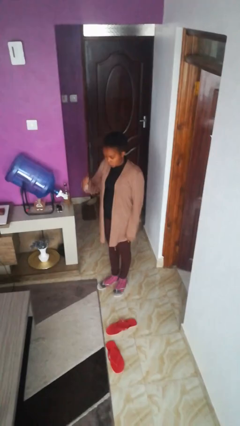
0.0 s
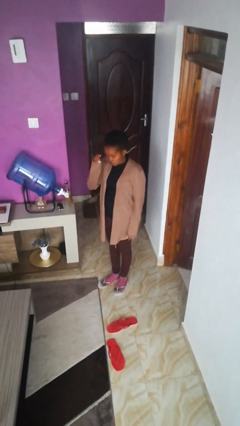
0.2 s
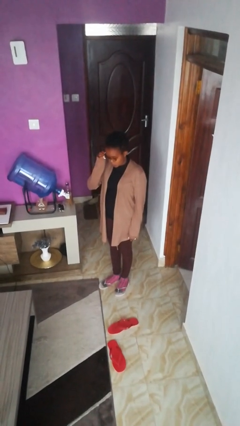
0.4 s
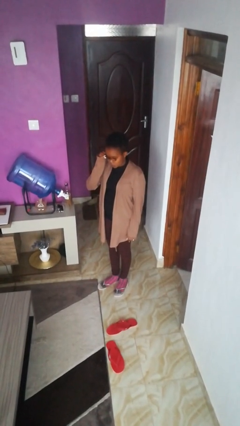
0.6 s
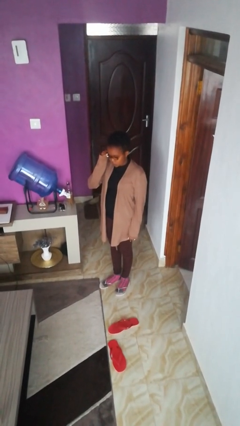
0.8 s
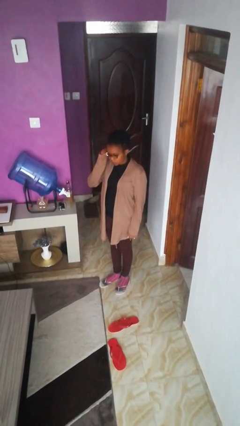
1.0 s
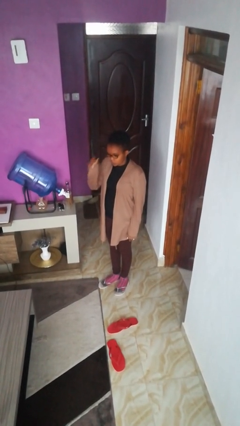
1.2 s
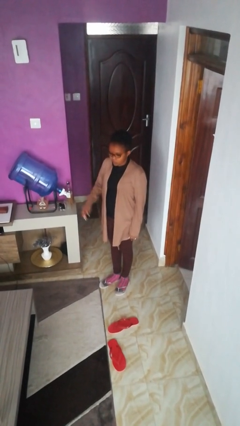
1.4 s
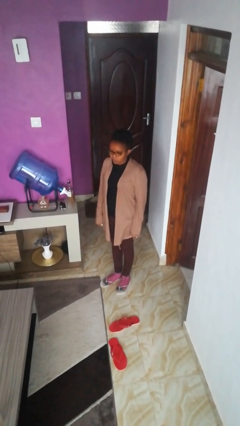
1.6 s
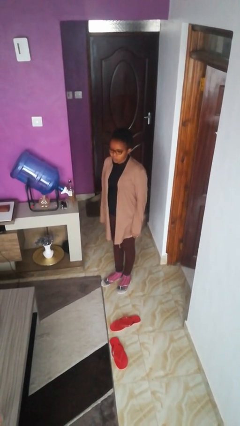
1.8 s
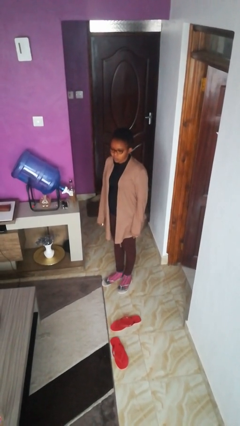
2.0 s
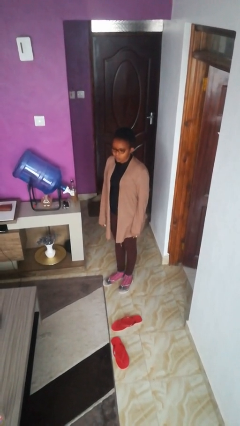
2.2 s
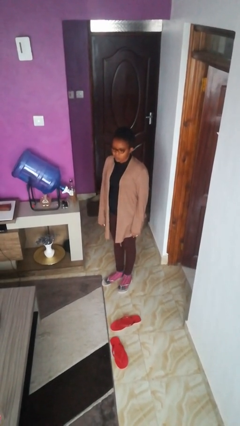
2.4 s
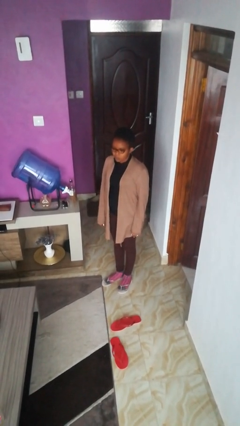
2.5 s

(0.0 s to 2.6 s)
person puts on glasses

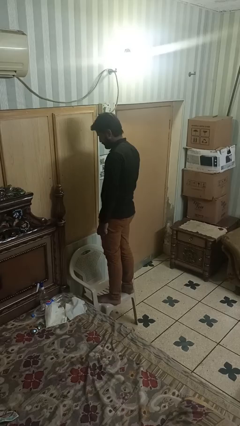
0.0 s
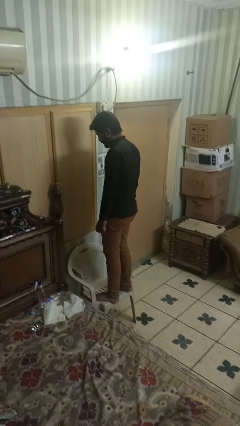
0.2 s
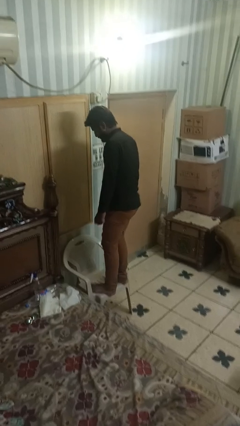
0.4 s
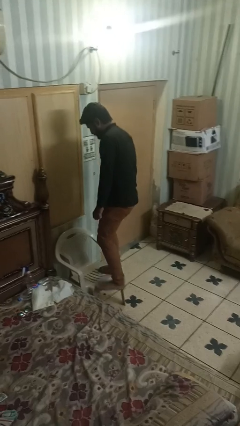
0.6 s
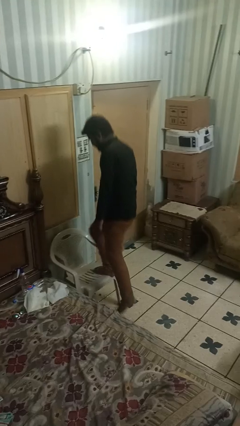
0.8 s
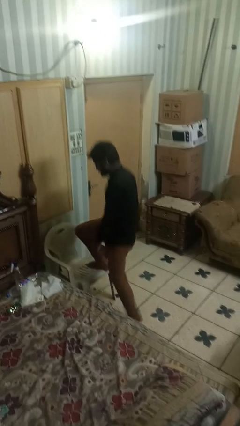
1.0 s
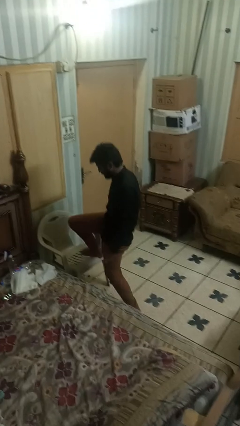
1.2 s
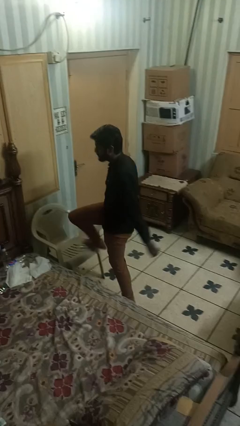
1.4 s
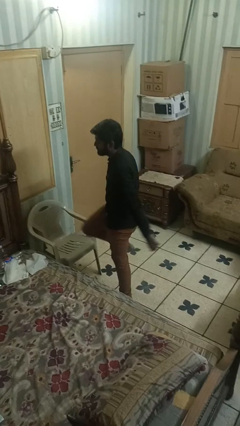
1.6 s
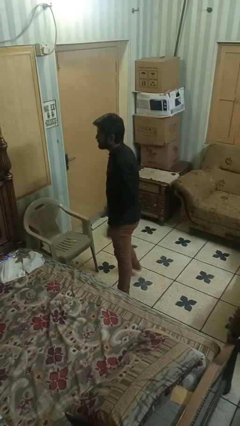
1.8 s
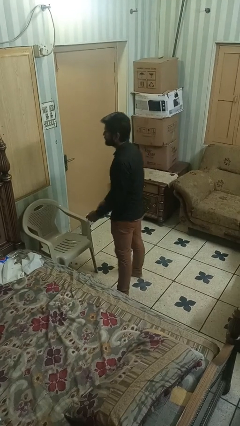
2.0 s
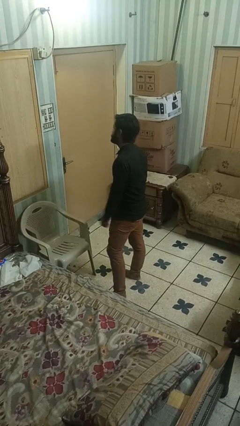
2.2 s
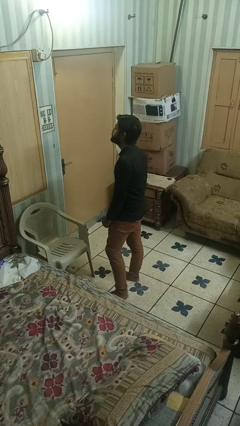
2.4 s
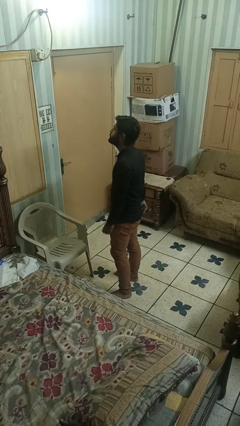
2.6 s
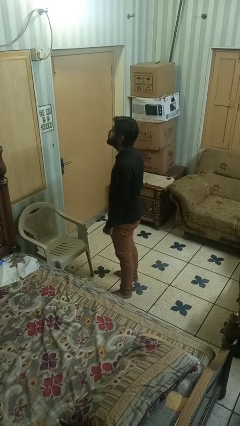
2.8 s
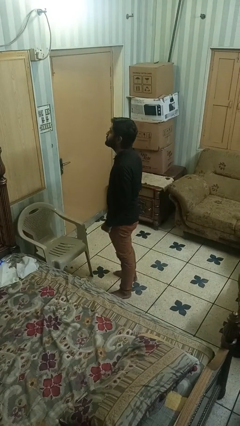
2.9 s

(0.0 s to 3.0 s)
person climbs off chair

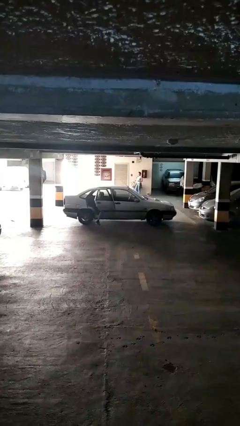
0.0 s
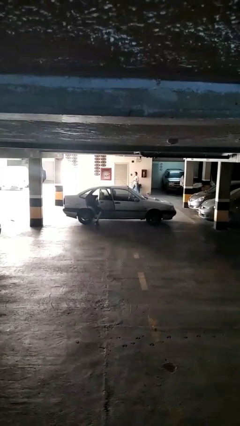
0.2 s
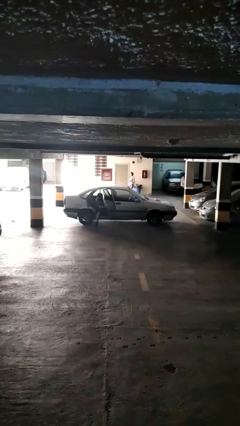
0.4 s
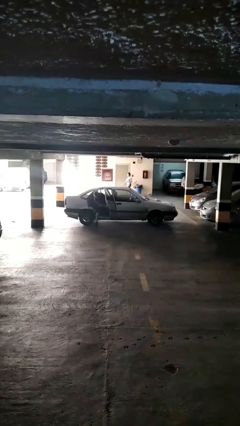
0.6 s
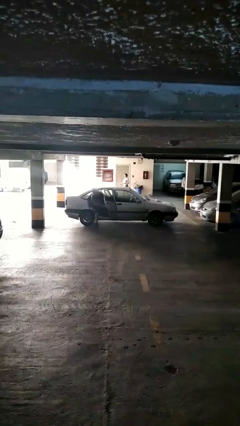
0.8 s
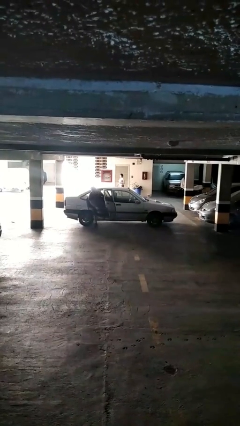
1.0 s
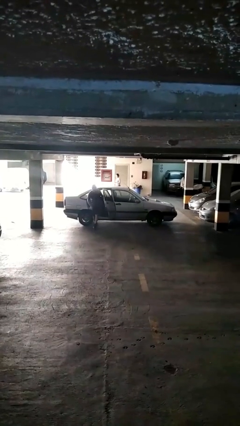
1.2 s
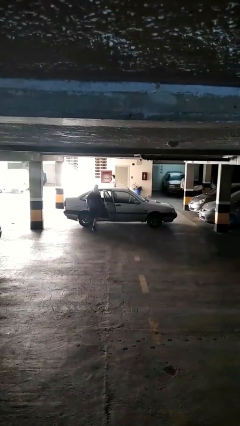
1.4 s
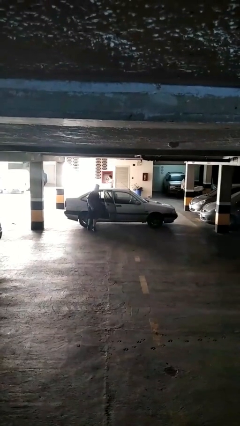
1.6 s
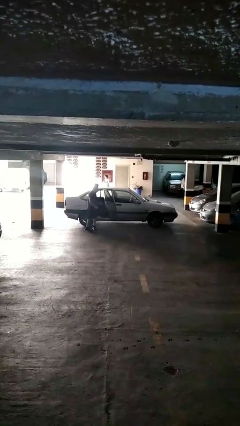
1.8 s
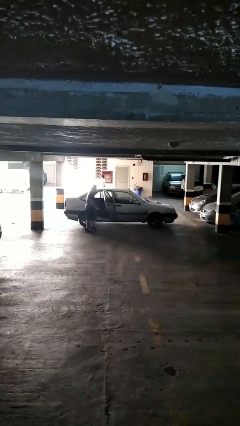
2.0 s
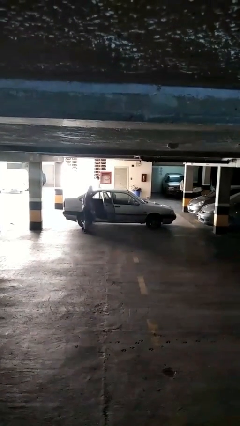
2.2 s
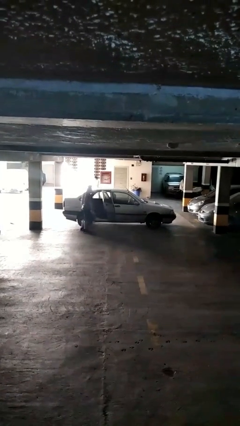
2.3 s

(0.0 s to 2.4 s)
car drops off person

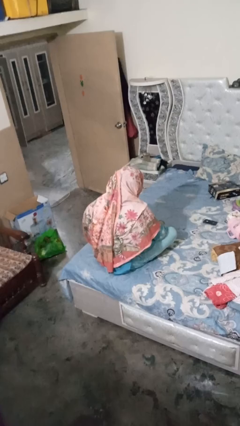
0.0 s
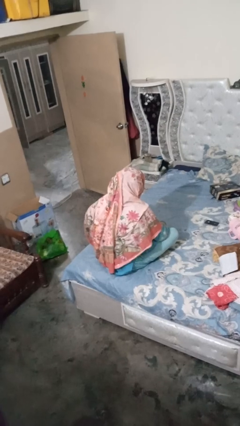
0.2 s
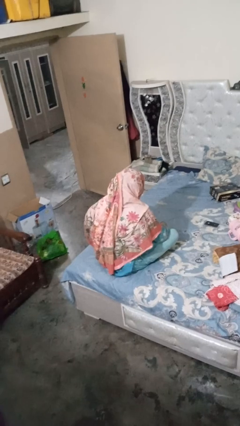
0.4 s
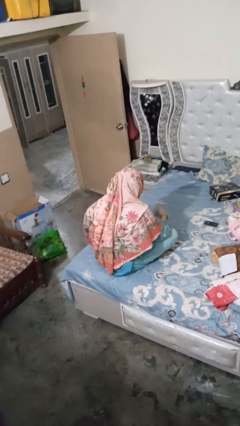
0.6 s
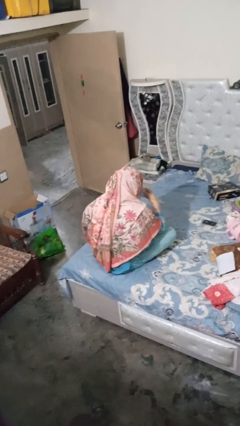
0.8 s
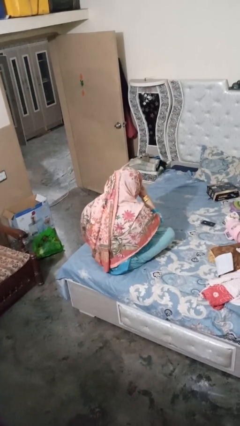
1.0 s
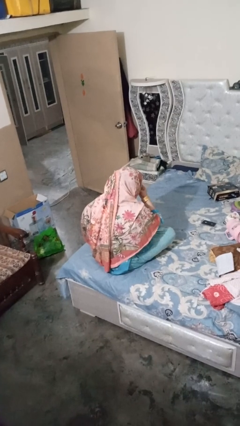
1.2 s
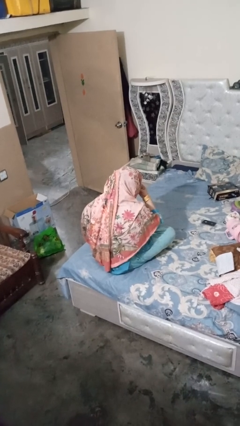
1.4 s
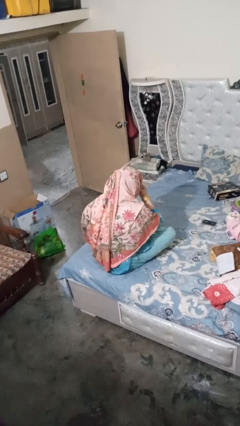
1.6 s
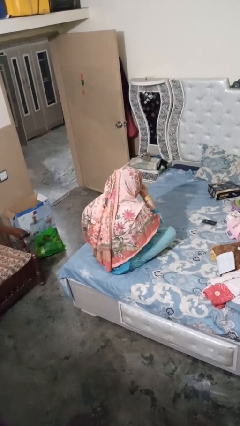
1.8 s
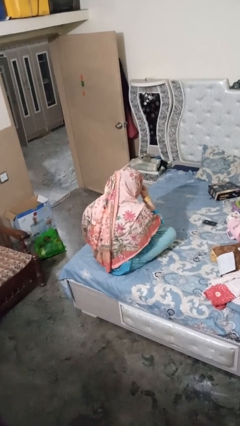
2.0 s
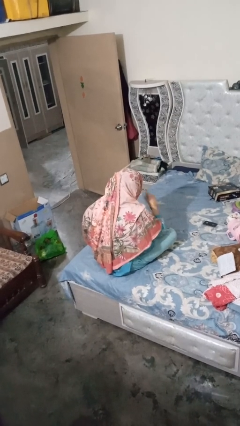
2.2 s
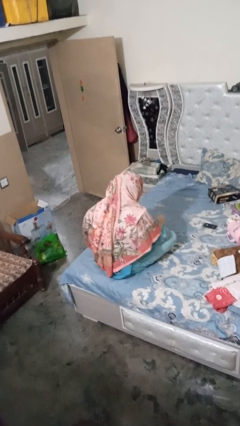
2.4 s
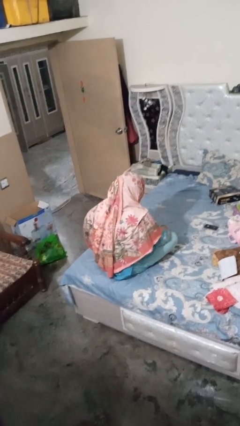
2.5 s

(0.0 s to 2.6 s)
person blows nose

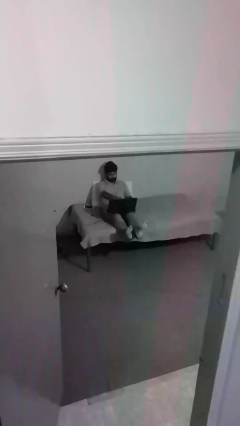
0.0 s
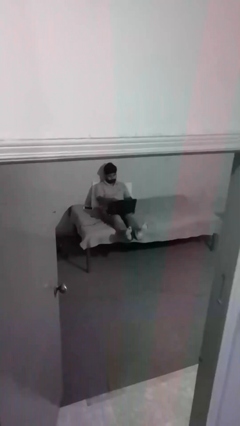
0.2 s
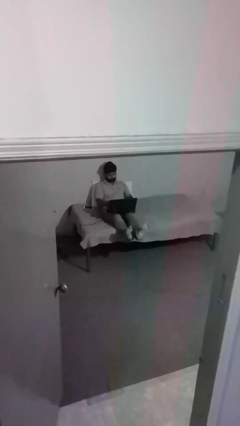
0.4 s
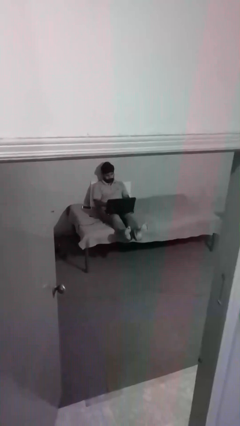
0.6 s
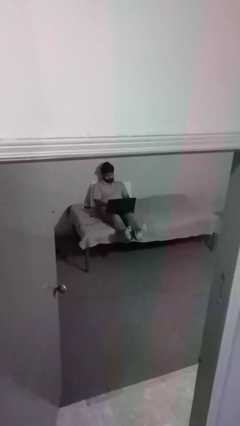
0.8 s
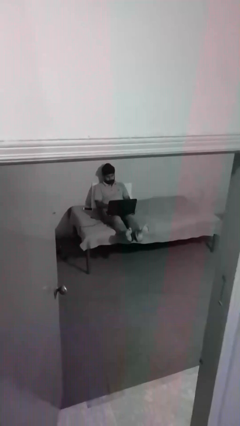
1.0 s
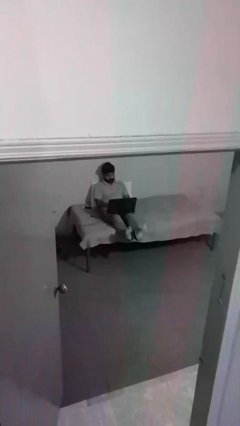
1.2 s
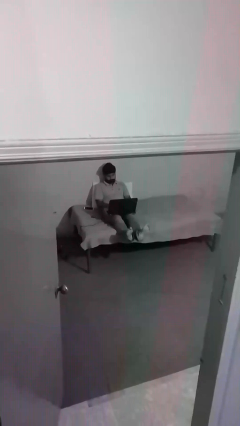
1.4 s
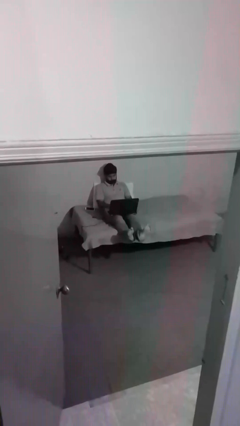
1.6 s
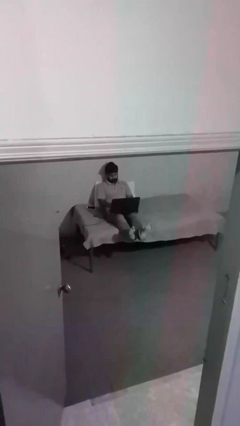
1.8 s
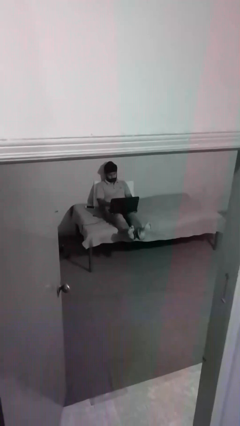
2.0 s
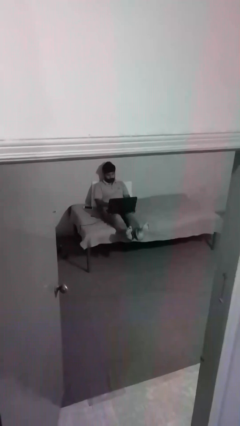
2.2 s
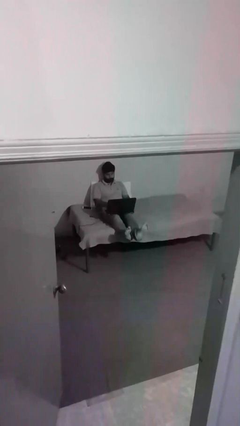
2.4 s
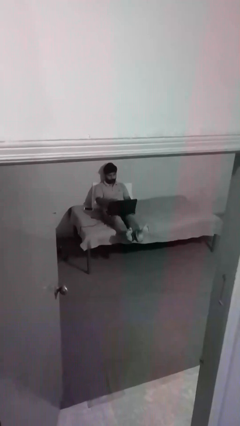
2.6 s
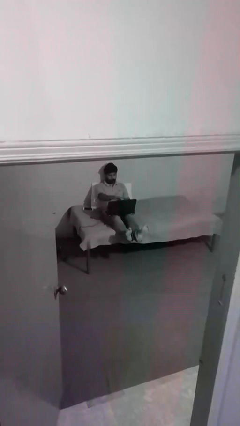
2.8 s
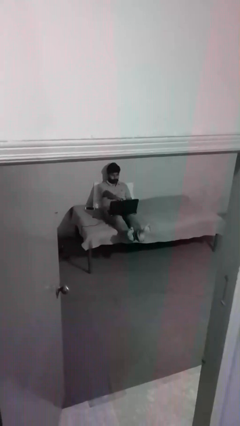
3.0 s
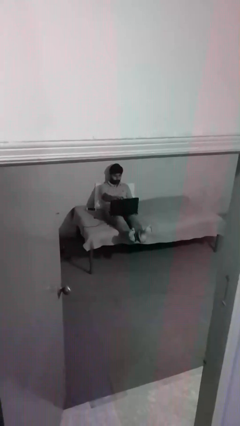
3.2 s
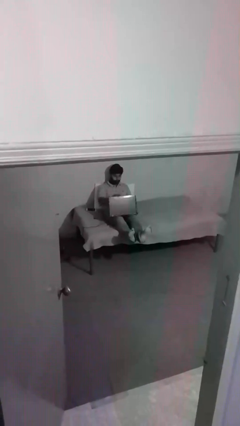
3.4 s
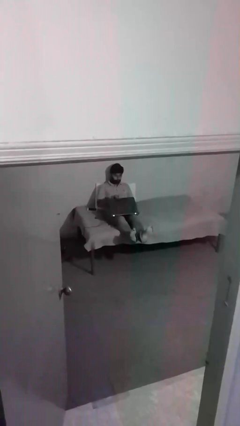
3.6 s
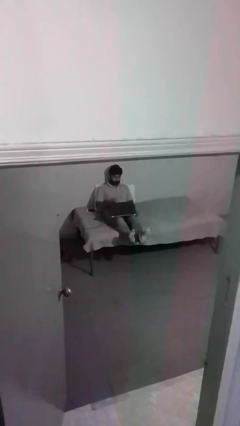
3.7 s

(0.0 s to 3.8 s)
person interacts with laptop

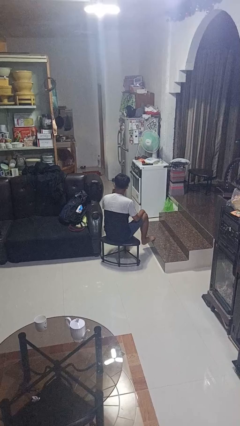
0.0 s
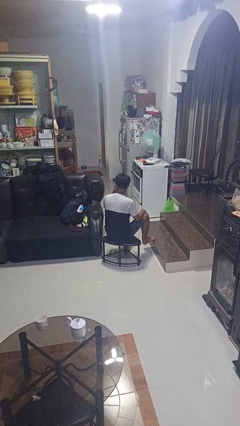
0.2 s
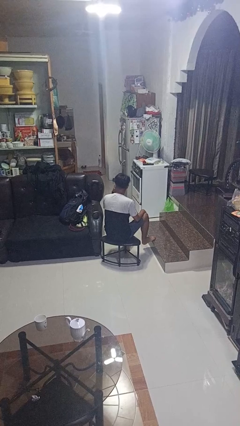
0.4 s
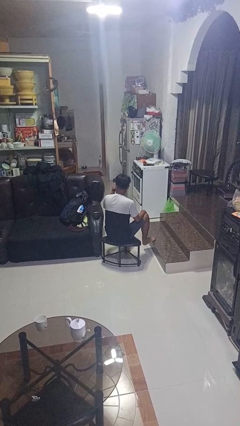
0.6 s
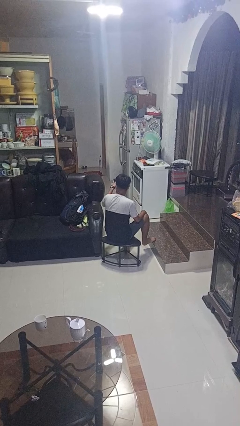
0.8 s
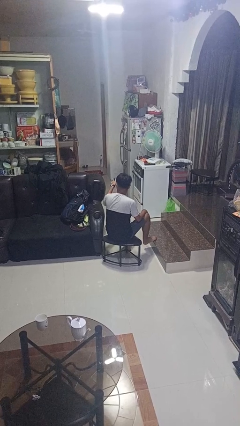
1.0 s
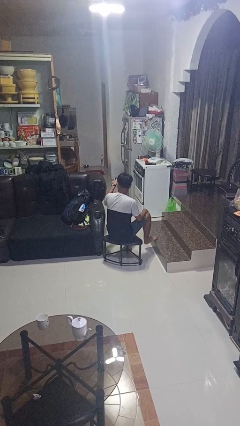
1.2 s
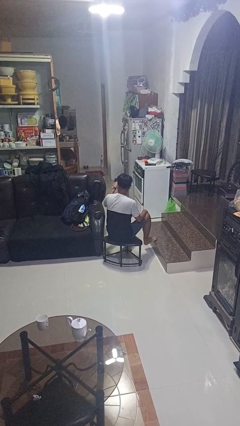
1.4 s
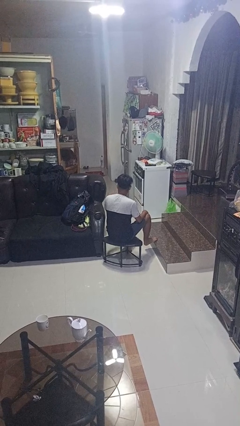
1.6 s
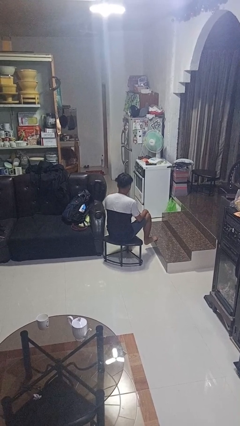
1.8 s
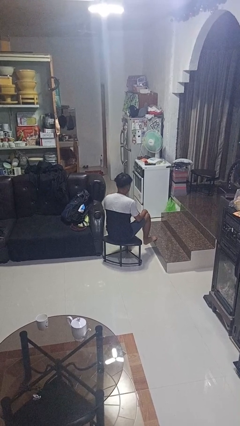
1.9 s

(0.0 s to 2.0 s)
person gestures watch closely

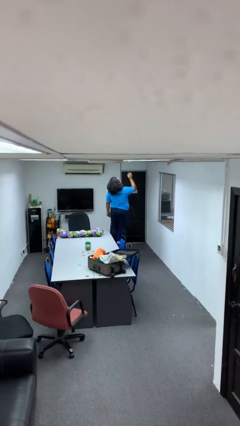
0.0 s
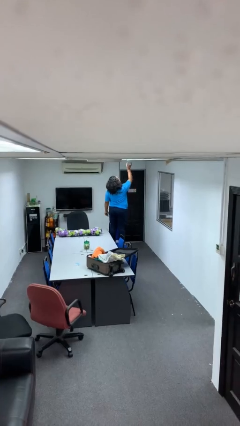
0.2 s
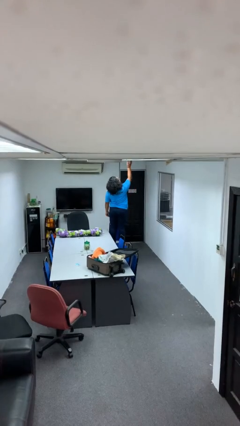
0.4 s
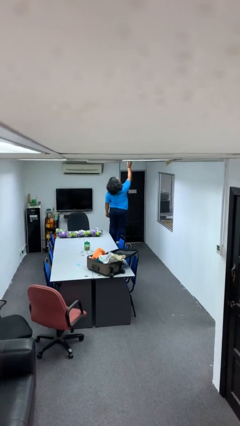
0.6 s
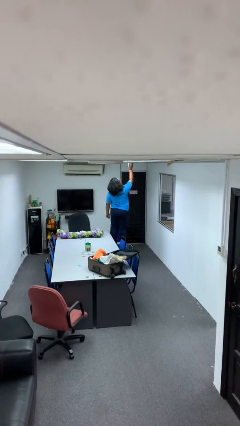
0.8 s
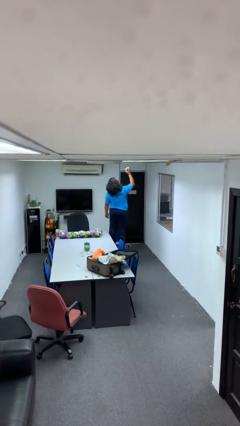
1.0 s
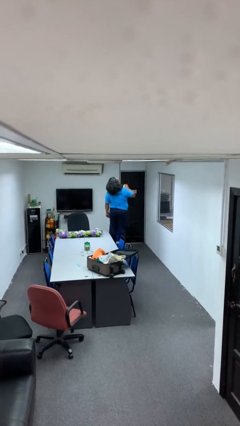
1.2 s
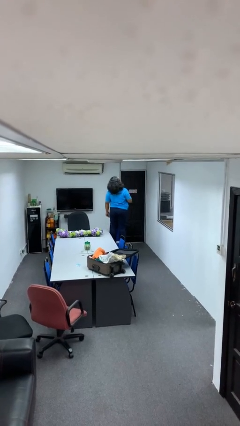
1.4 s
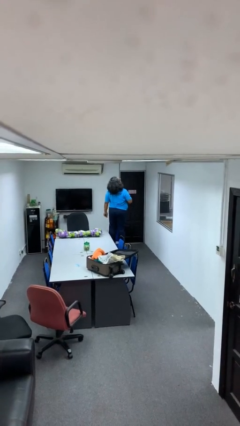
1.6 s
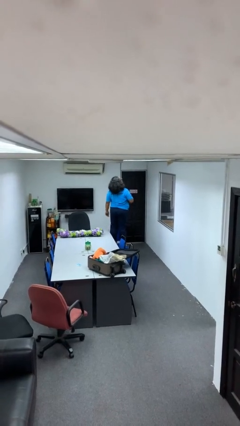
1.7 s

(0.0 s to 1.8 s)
person takes down smoke detector
